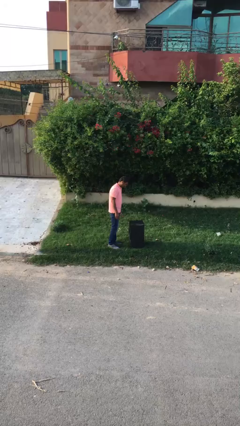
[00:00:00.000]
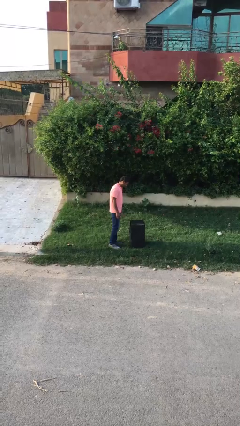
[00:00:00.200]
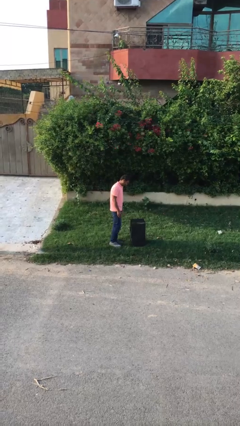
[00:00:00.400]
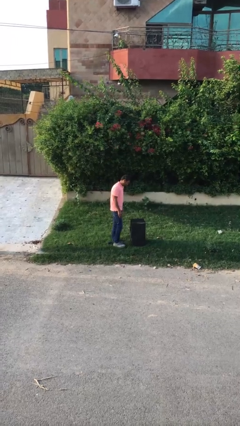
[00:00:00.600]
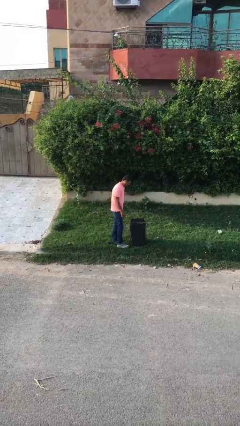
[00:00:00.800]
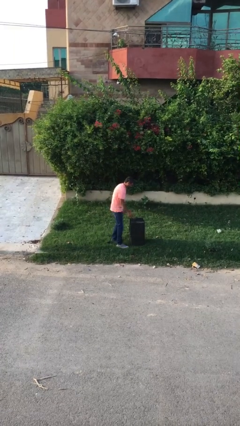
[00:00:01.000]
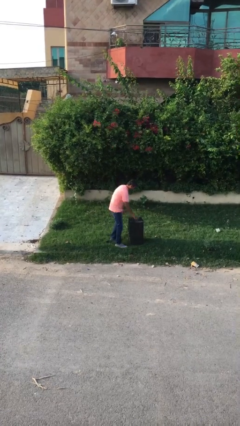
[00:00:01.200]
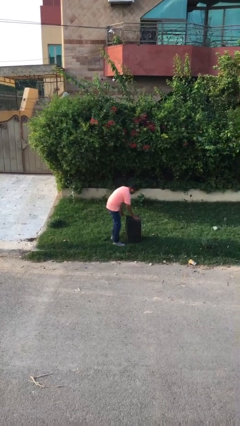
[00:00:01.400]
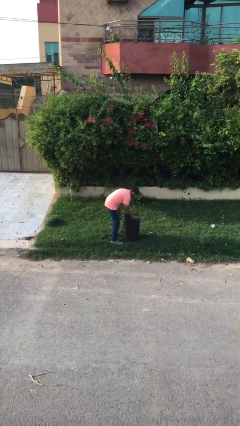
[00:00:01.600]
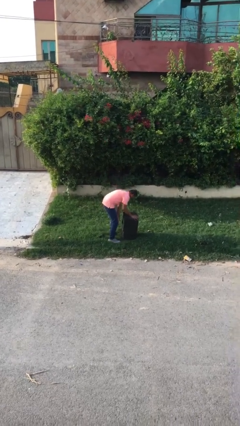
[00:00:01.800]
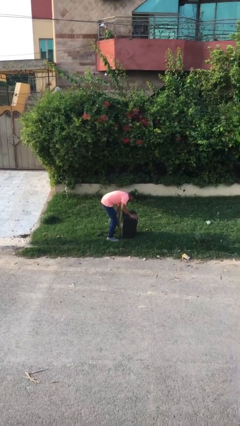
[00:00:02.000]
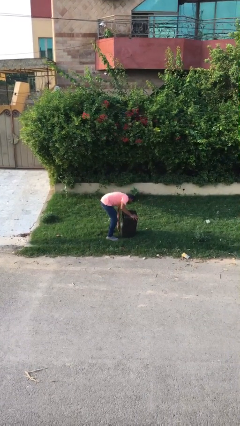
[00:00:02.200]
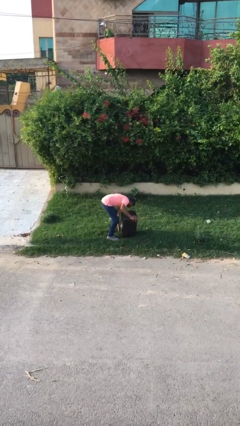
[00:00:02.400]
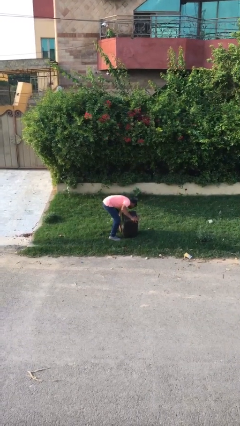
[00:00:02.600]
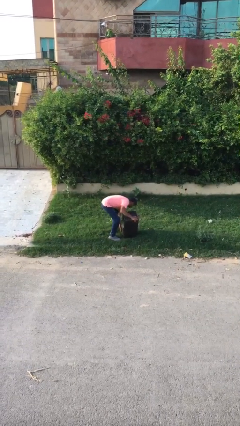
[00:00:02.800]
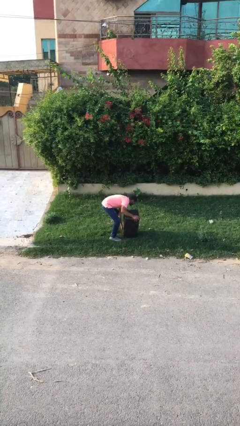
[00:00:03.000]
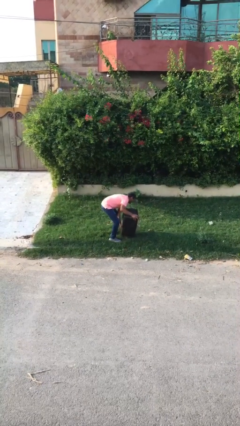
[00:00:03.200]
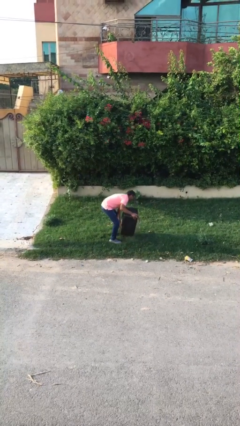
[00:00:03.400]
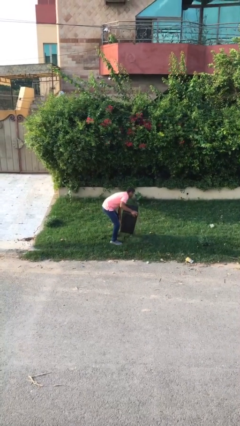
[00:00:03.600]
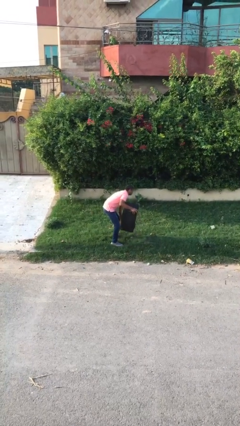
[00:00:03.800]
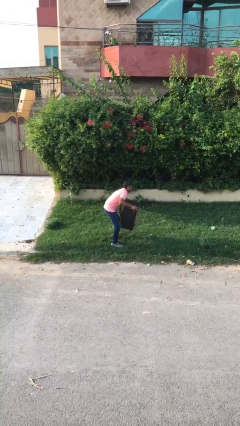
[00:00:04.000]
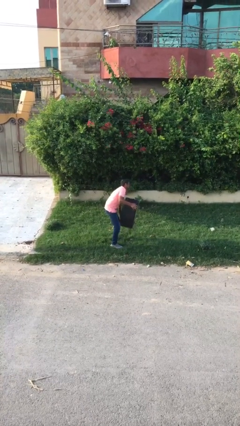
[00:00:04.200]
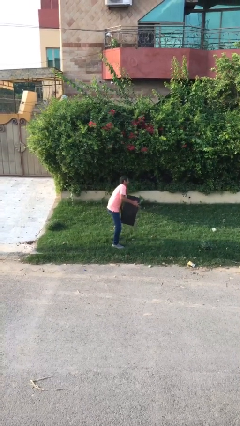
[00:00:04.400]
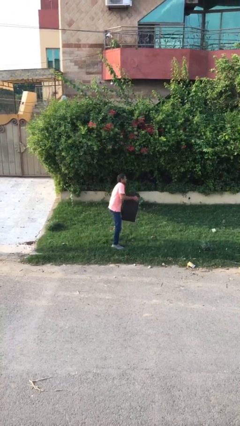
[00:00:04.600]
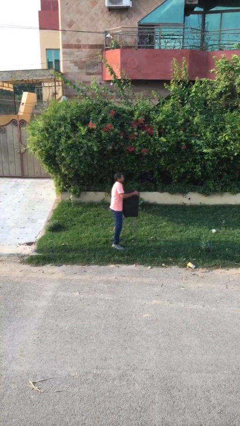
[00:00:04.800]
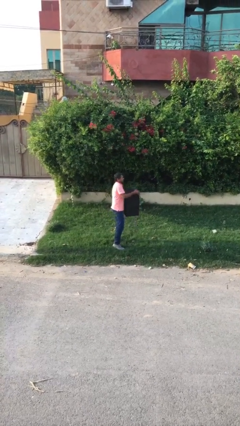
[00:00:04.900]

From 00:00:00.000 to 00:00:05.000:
person picks up object from floor

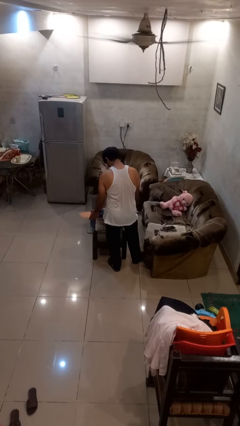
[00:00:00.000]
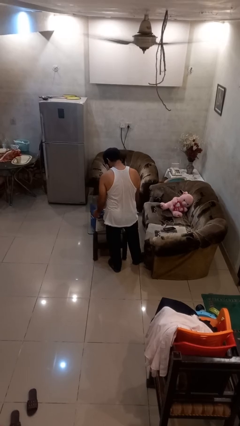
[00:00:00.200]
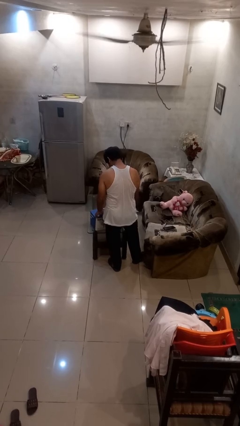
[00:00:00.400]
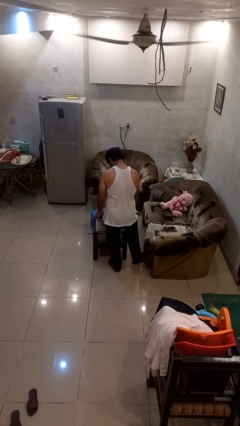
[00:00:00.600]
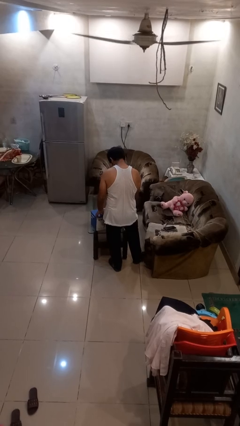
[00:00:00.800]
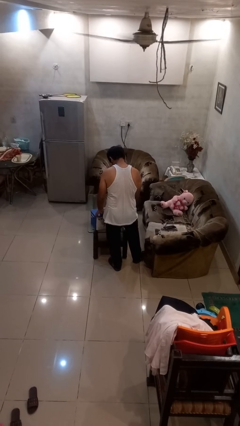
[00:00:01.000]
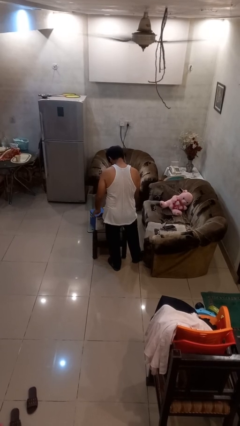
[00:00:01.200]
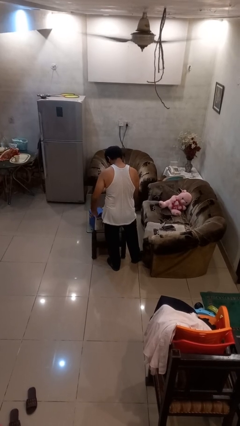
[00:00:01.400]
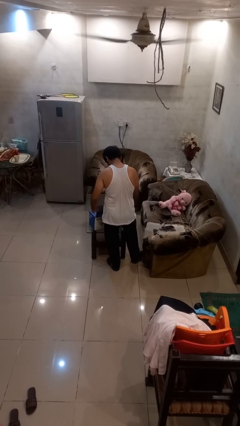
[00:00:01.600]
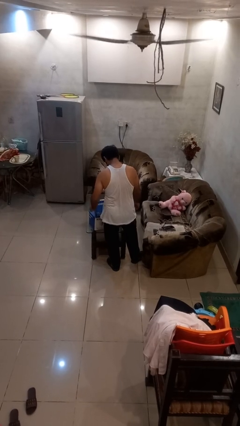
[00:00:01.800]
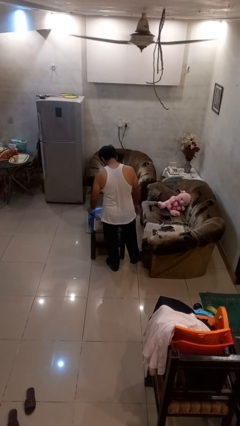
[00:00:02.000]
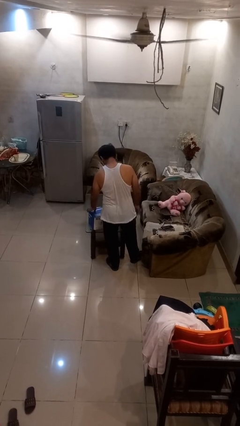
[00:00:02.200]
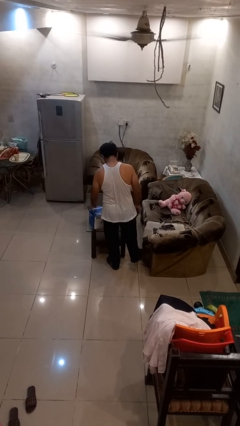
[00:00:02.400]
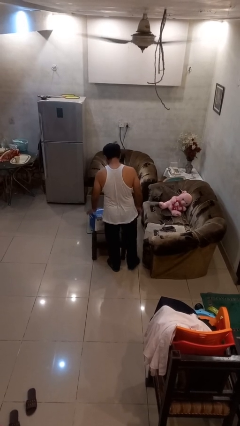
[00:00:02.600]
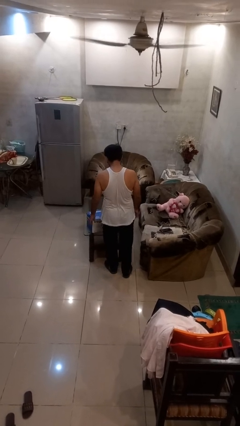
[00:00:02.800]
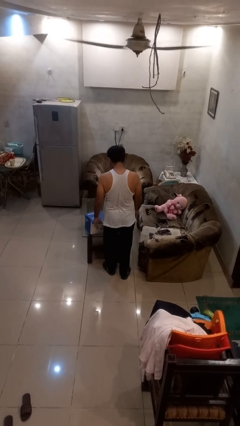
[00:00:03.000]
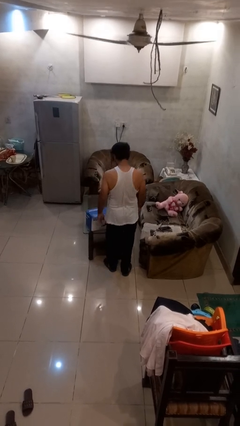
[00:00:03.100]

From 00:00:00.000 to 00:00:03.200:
person closes box

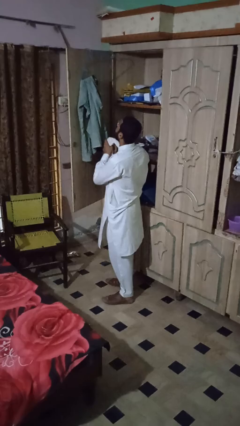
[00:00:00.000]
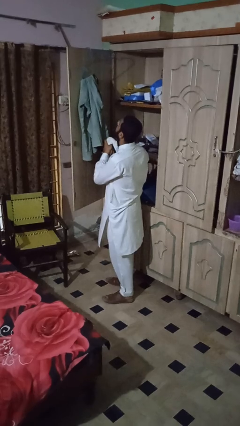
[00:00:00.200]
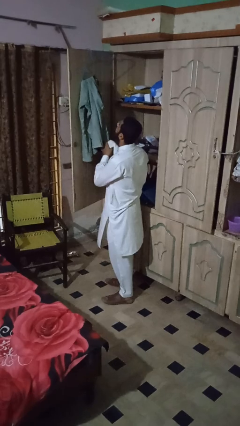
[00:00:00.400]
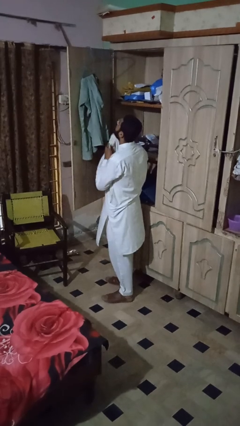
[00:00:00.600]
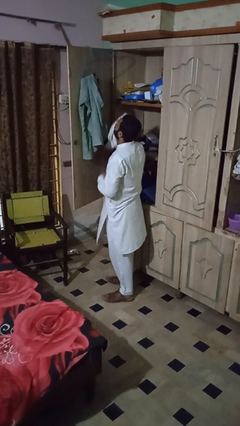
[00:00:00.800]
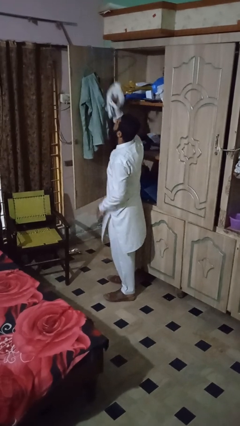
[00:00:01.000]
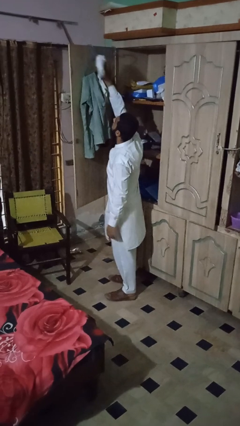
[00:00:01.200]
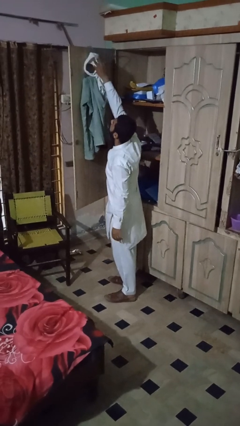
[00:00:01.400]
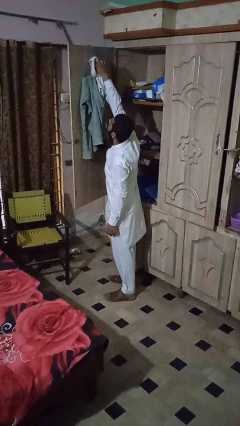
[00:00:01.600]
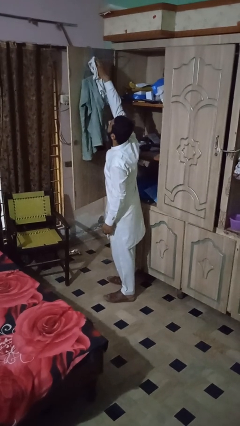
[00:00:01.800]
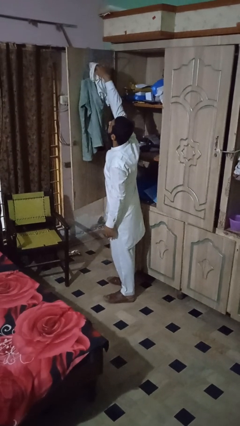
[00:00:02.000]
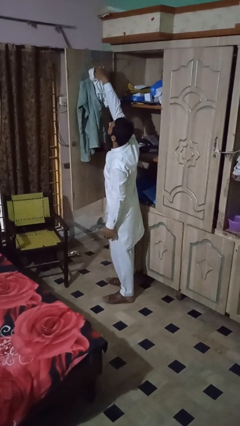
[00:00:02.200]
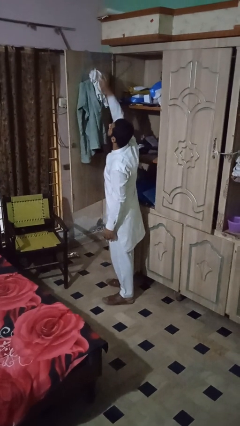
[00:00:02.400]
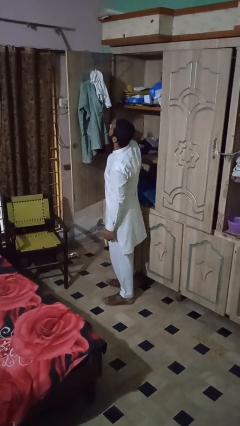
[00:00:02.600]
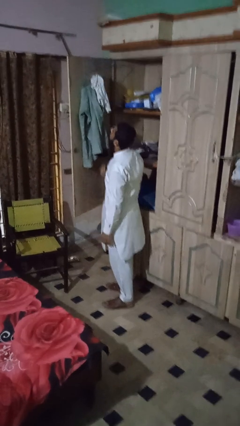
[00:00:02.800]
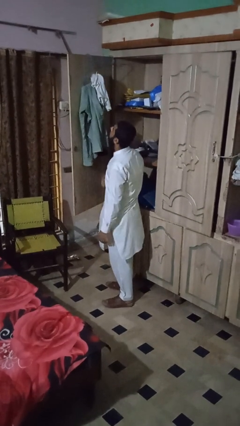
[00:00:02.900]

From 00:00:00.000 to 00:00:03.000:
person puts clothes into closet

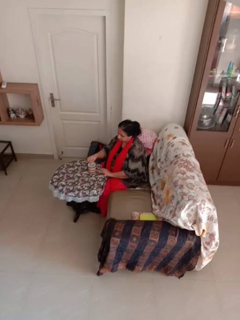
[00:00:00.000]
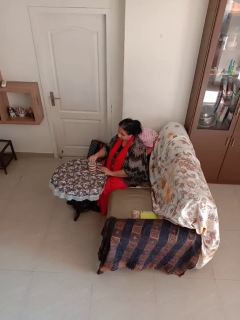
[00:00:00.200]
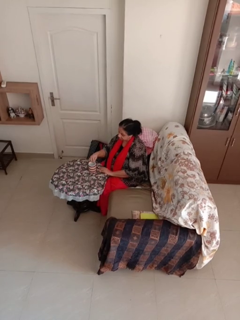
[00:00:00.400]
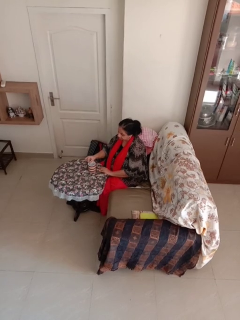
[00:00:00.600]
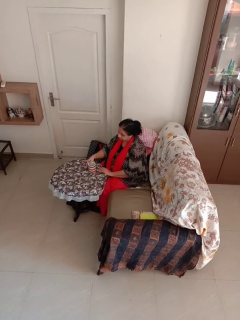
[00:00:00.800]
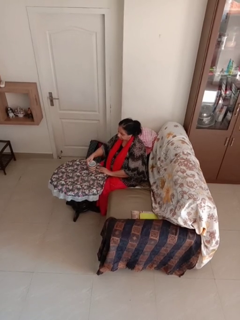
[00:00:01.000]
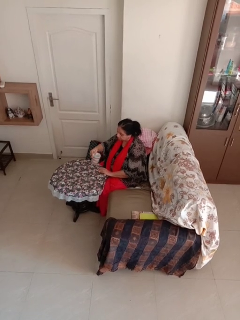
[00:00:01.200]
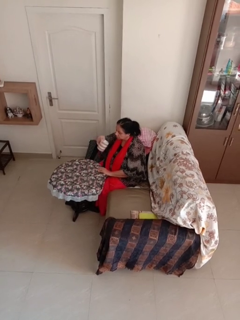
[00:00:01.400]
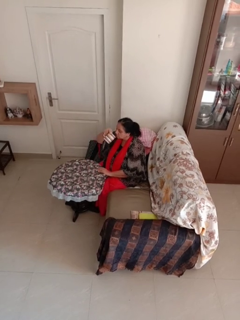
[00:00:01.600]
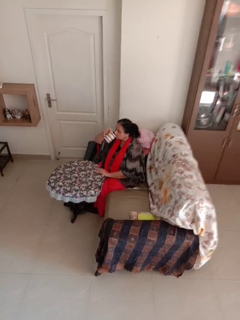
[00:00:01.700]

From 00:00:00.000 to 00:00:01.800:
person stirs mug

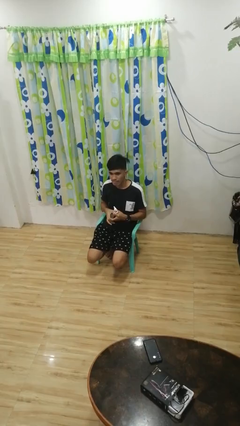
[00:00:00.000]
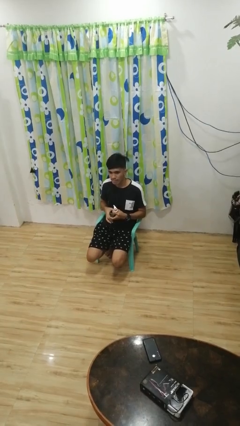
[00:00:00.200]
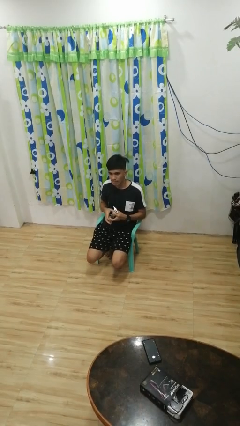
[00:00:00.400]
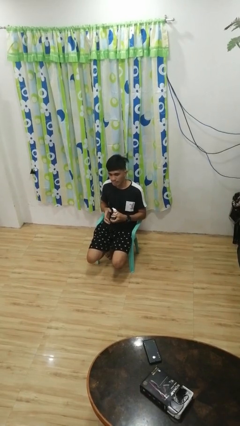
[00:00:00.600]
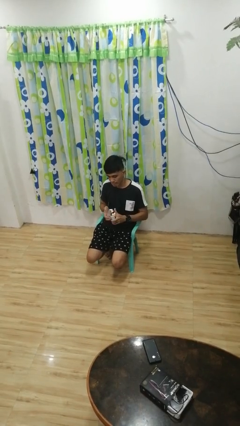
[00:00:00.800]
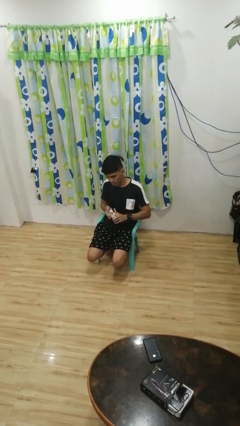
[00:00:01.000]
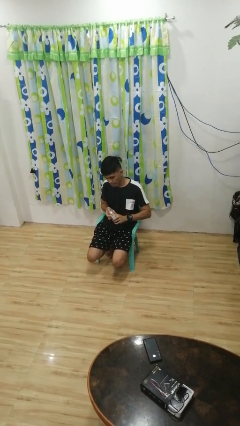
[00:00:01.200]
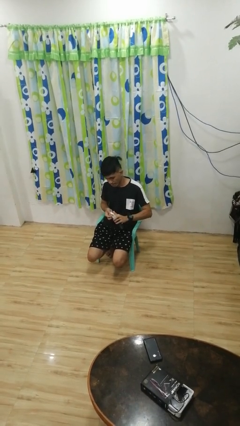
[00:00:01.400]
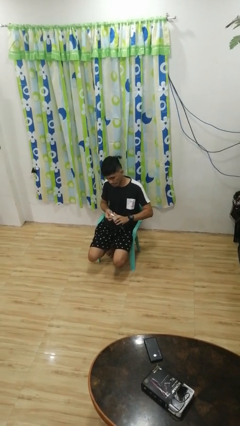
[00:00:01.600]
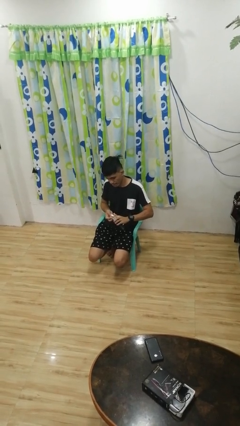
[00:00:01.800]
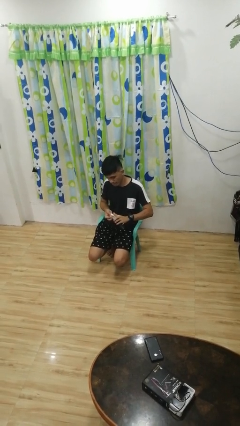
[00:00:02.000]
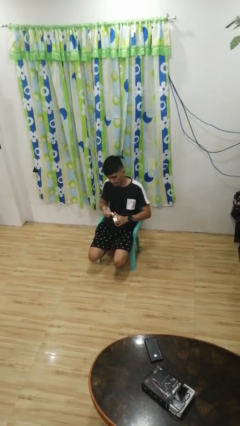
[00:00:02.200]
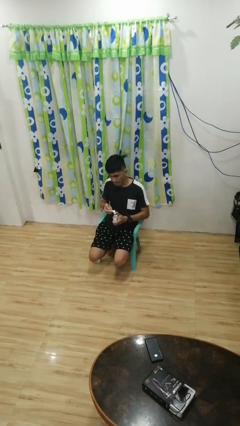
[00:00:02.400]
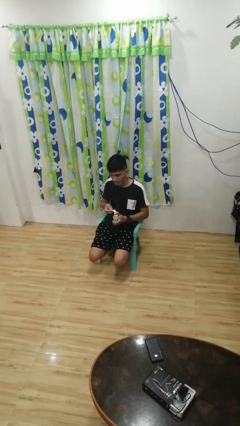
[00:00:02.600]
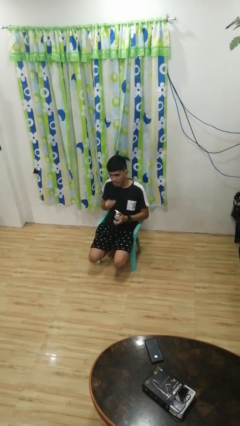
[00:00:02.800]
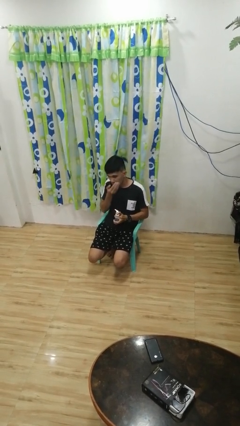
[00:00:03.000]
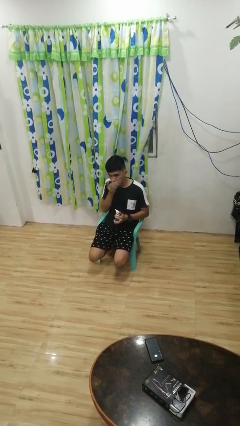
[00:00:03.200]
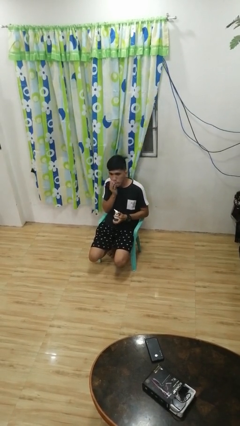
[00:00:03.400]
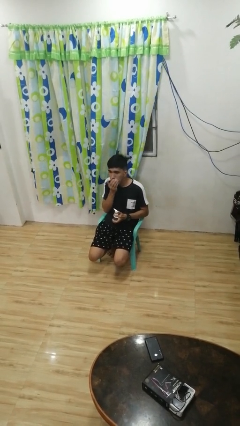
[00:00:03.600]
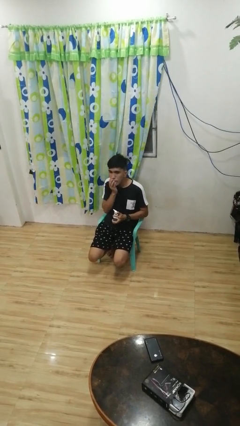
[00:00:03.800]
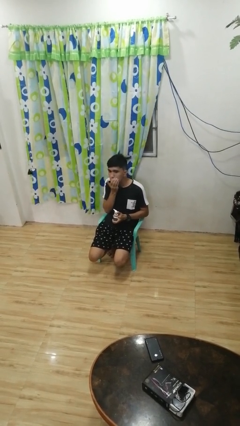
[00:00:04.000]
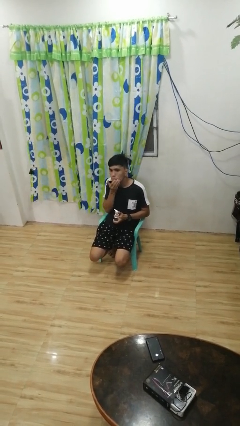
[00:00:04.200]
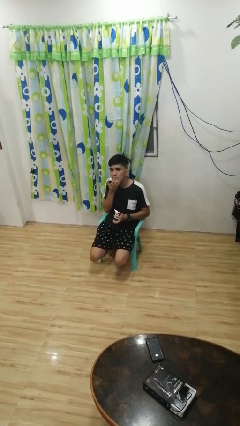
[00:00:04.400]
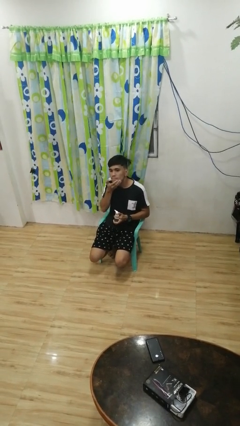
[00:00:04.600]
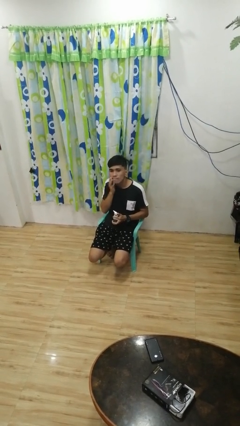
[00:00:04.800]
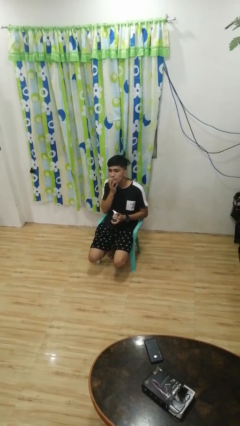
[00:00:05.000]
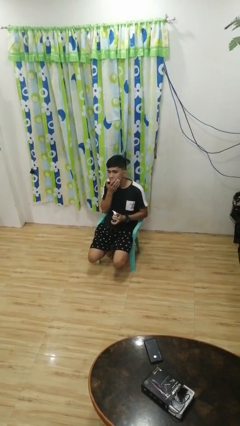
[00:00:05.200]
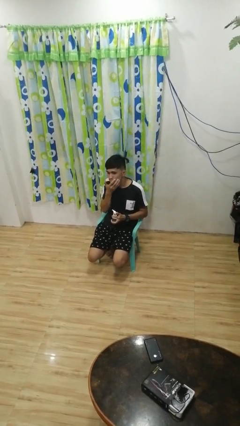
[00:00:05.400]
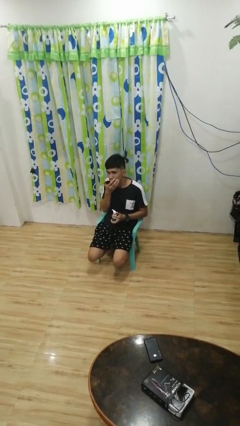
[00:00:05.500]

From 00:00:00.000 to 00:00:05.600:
person applies shaving cream
